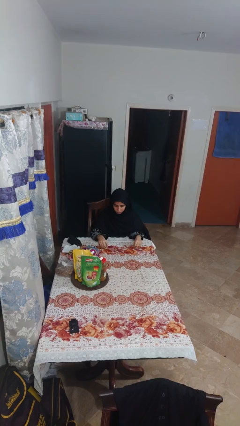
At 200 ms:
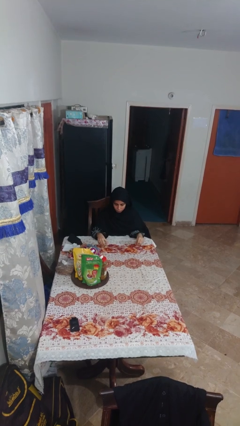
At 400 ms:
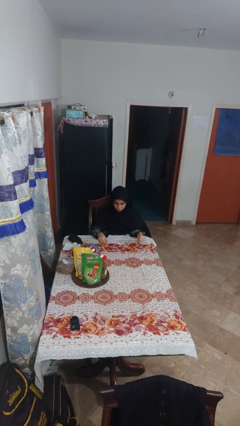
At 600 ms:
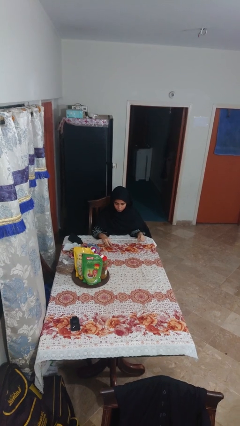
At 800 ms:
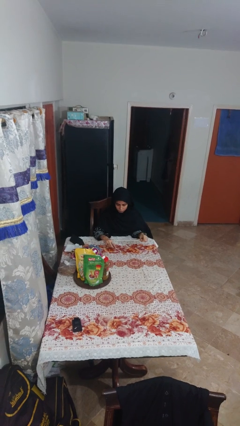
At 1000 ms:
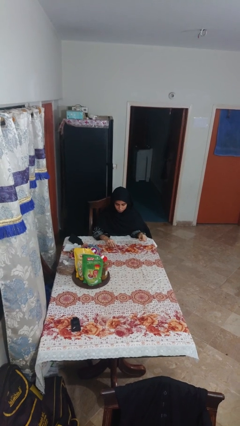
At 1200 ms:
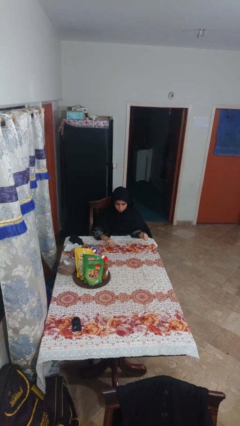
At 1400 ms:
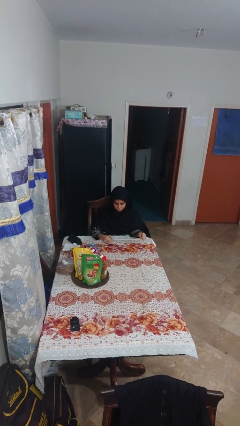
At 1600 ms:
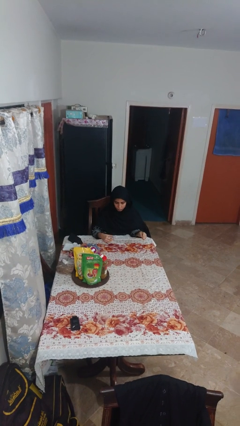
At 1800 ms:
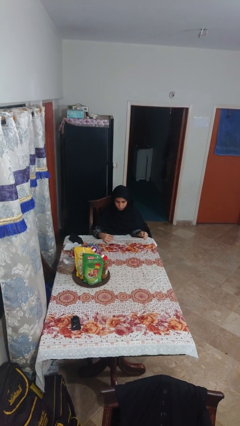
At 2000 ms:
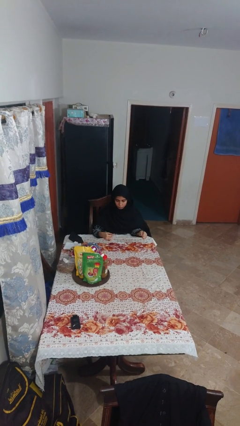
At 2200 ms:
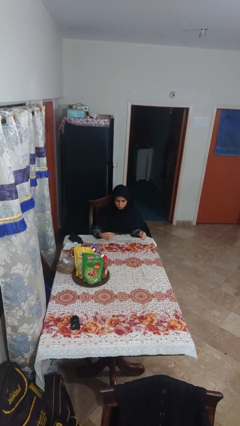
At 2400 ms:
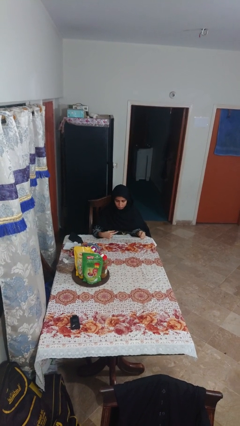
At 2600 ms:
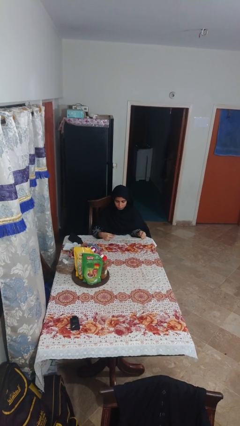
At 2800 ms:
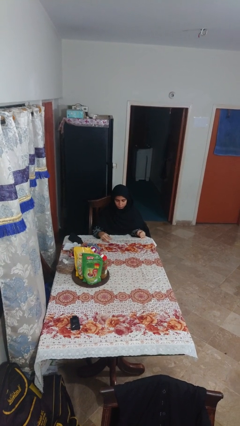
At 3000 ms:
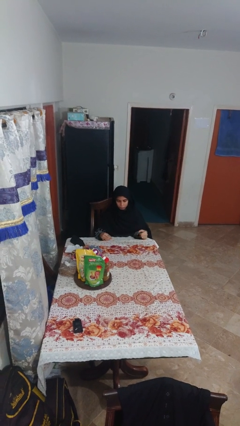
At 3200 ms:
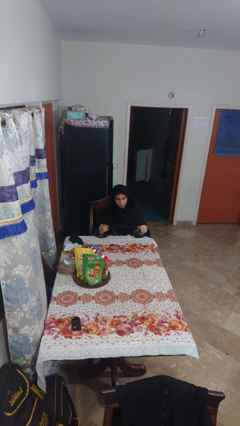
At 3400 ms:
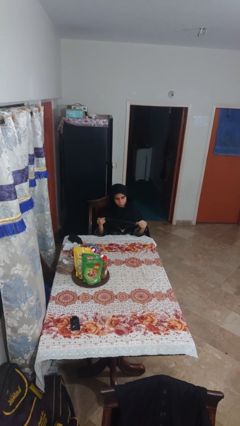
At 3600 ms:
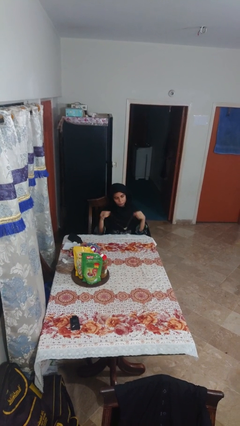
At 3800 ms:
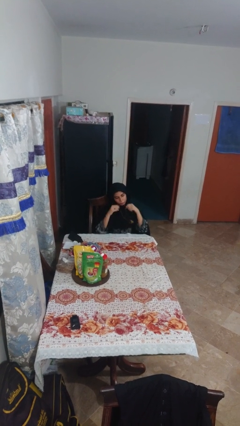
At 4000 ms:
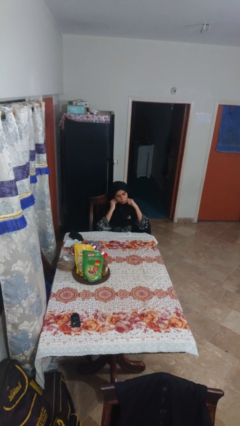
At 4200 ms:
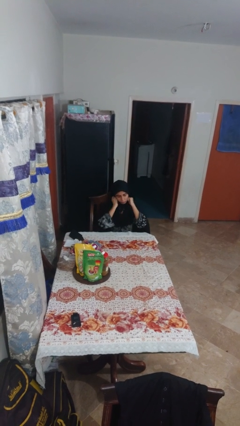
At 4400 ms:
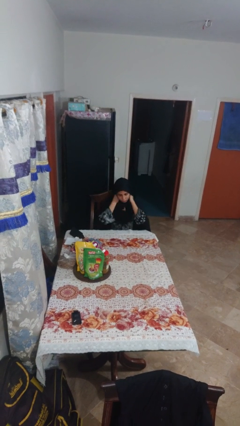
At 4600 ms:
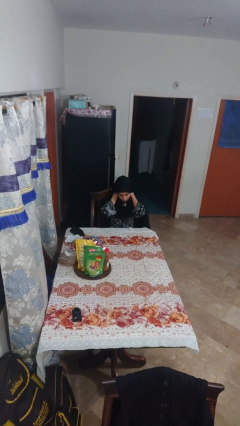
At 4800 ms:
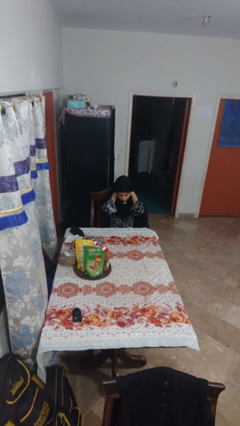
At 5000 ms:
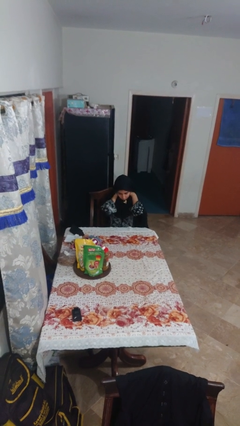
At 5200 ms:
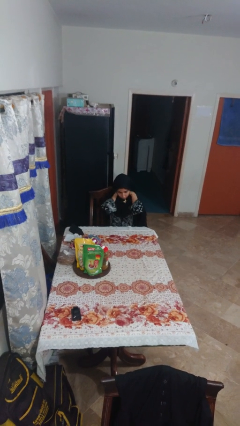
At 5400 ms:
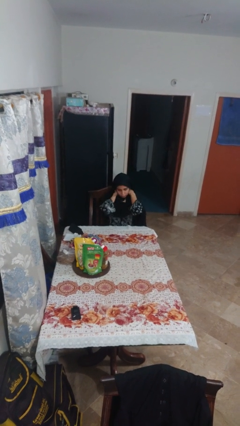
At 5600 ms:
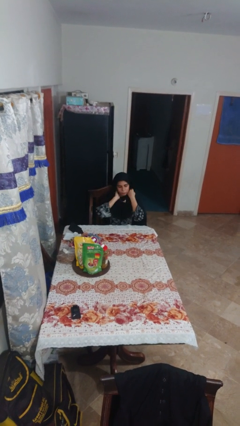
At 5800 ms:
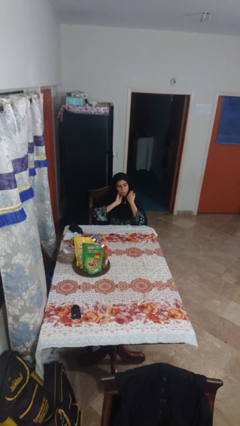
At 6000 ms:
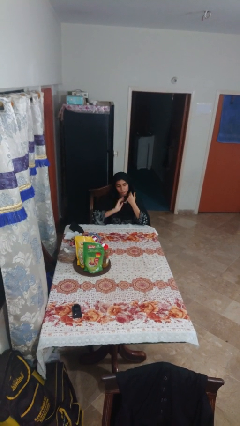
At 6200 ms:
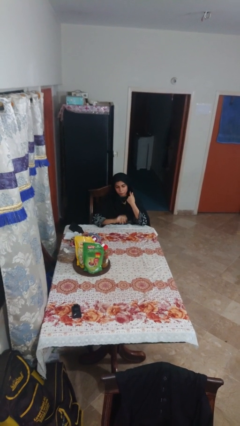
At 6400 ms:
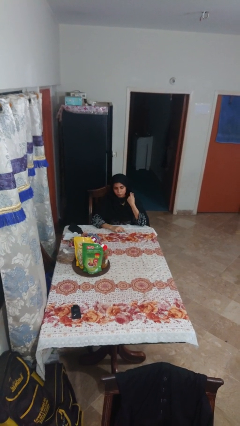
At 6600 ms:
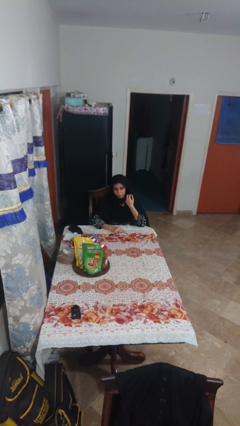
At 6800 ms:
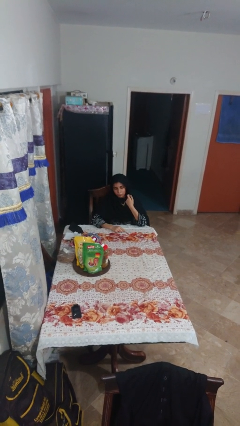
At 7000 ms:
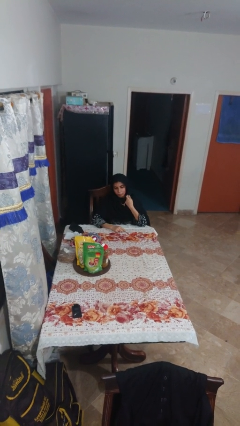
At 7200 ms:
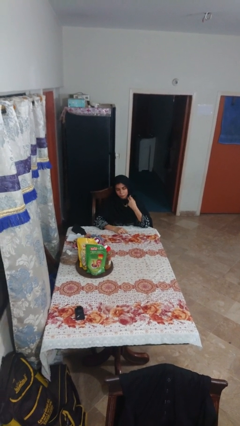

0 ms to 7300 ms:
person puts on necklace

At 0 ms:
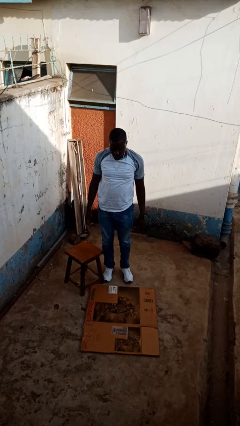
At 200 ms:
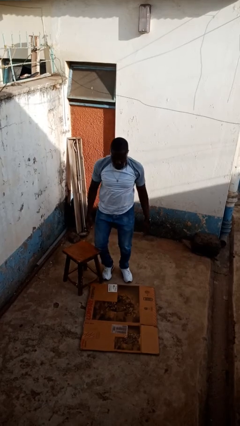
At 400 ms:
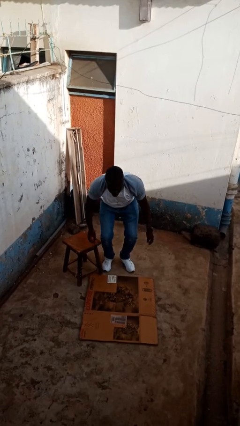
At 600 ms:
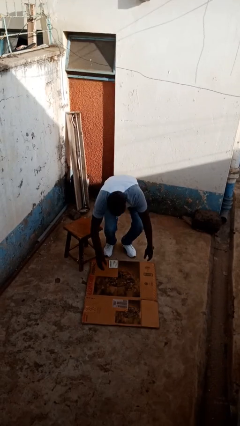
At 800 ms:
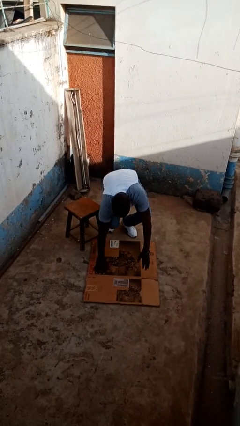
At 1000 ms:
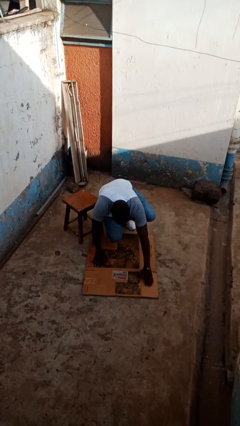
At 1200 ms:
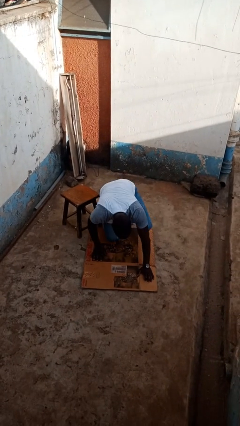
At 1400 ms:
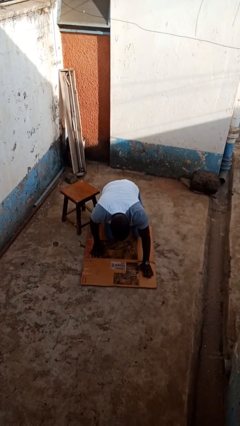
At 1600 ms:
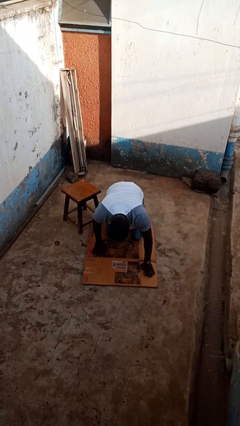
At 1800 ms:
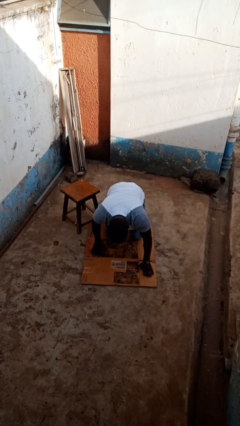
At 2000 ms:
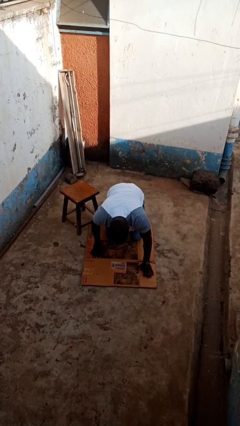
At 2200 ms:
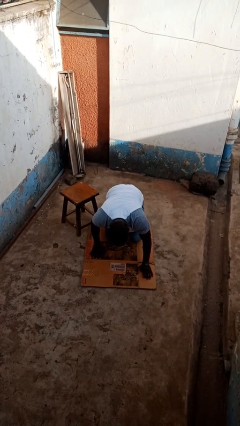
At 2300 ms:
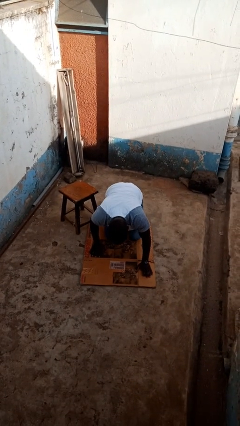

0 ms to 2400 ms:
person trips on object on floor

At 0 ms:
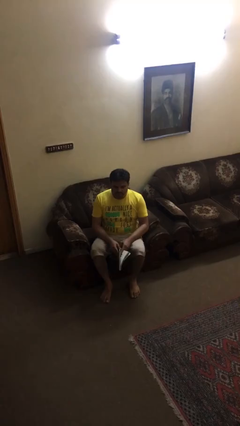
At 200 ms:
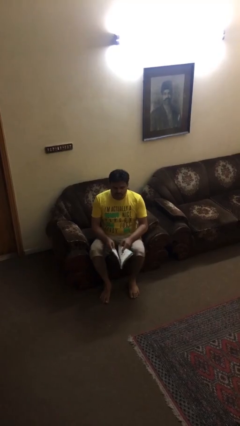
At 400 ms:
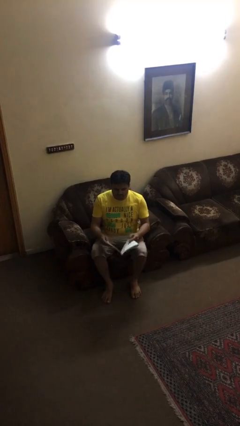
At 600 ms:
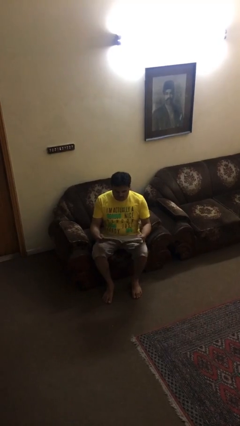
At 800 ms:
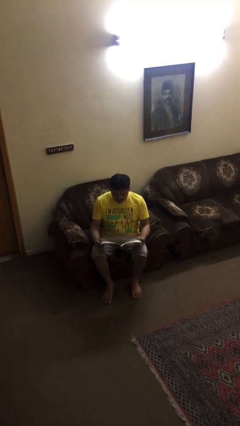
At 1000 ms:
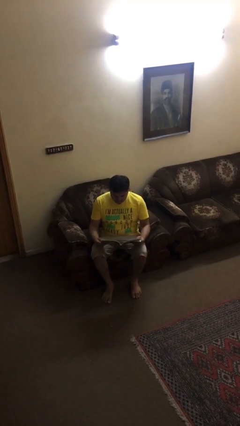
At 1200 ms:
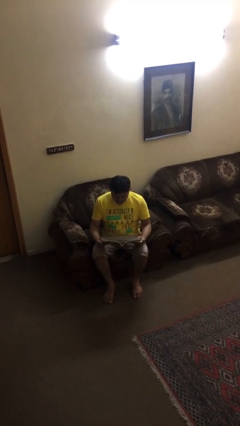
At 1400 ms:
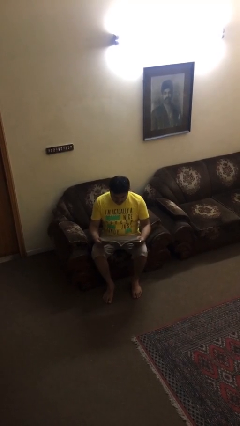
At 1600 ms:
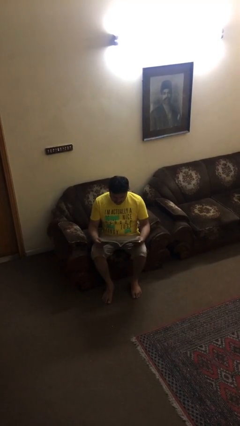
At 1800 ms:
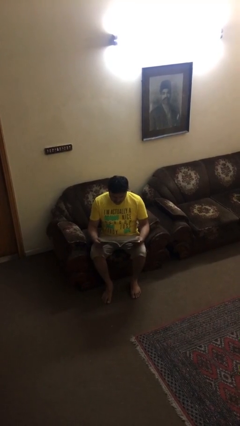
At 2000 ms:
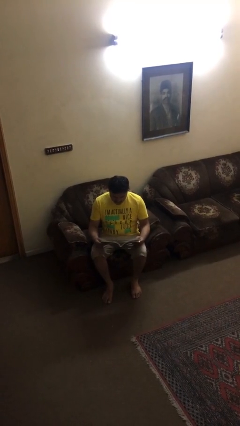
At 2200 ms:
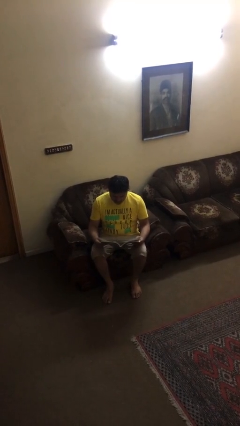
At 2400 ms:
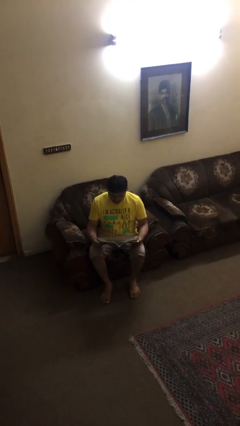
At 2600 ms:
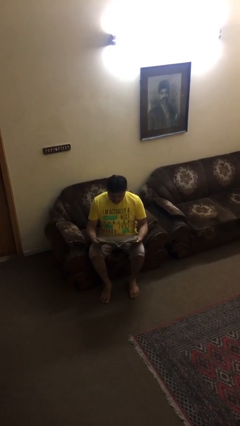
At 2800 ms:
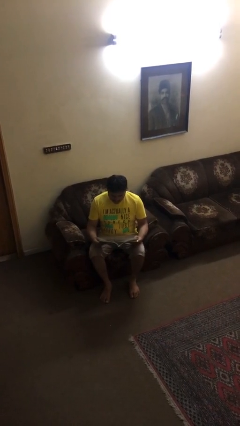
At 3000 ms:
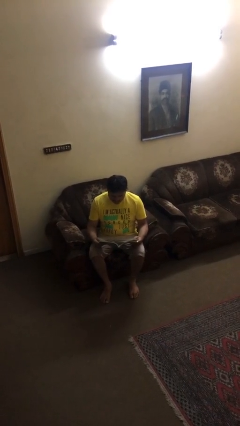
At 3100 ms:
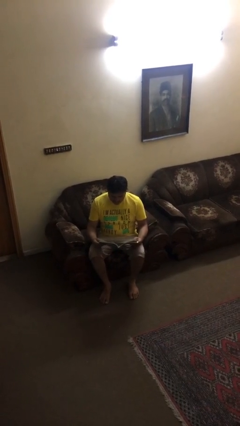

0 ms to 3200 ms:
person reads document

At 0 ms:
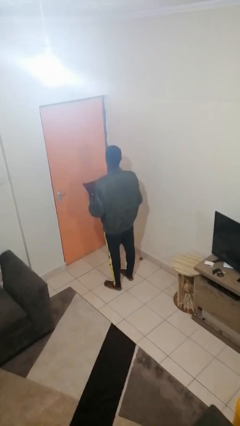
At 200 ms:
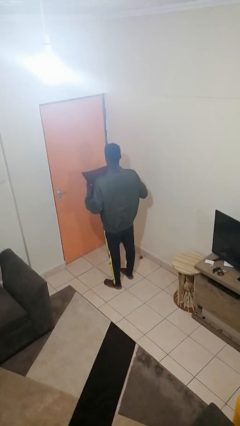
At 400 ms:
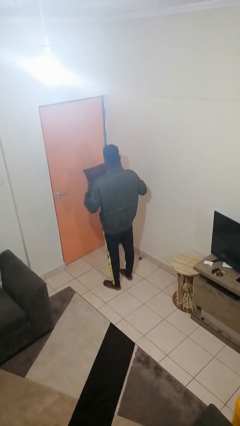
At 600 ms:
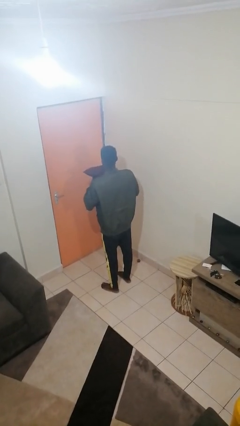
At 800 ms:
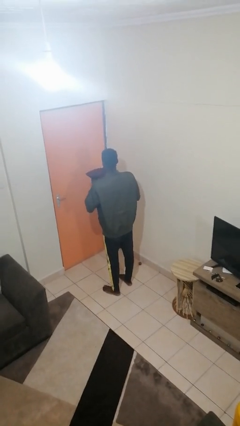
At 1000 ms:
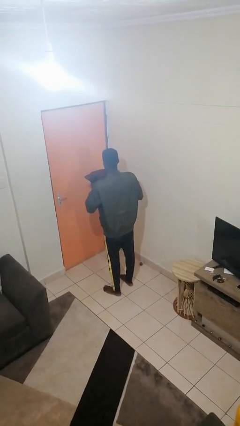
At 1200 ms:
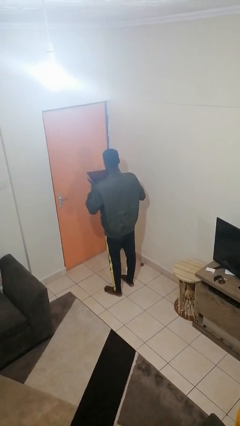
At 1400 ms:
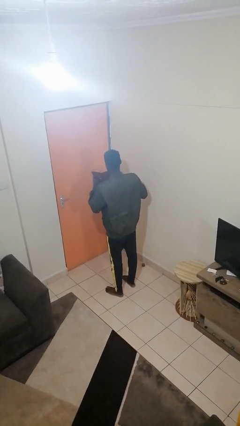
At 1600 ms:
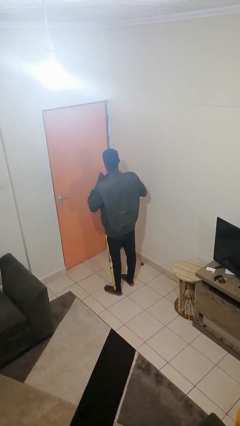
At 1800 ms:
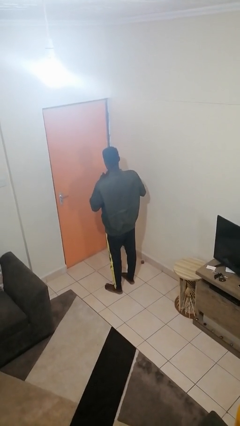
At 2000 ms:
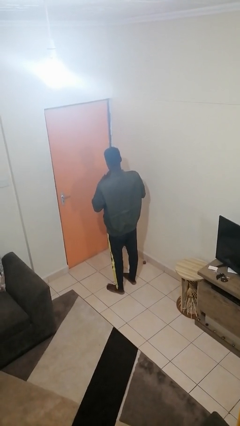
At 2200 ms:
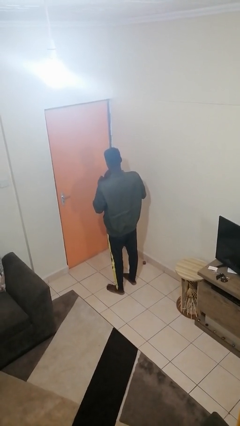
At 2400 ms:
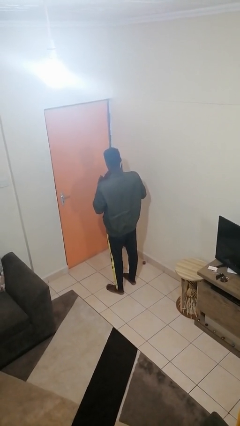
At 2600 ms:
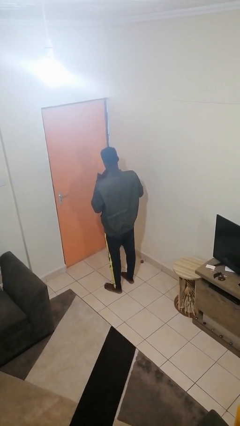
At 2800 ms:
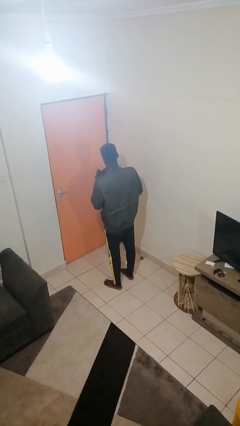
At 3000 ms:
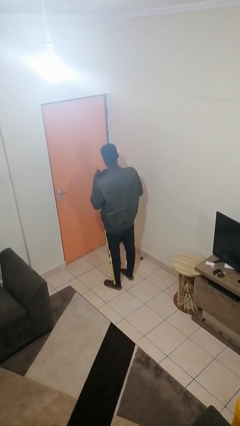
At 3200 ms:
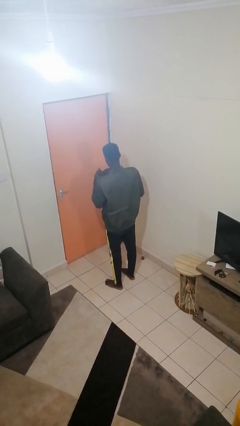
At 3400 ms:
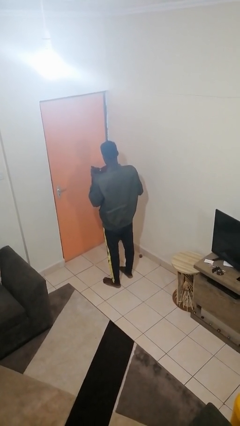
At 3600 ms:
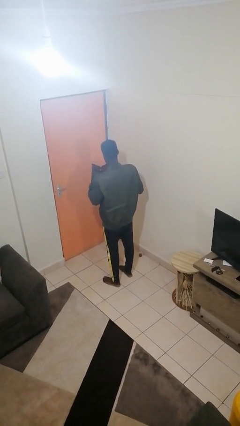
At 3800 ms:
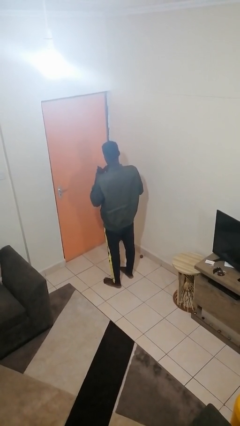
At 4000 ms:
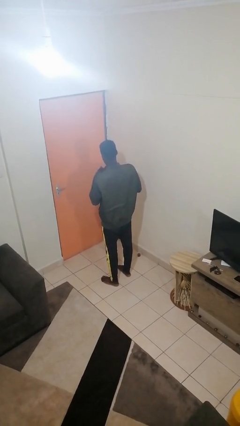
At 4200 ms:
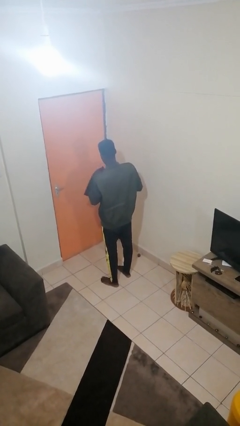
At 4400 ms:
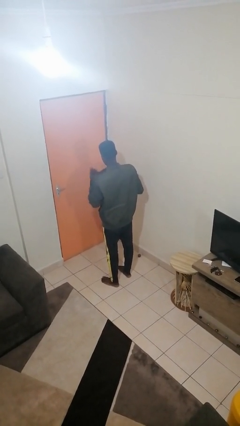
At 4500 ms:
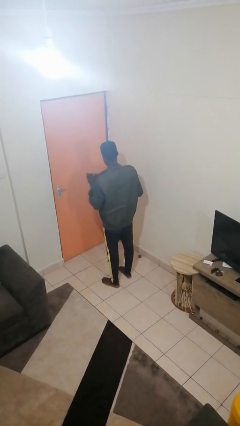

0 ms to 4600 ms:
person squeezes object
